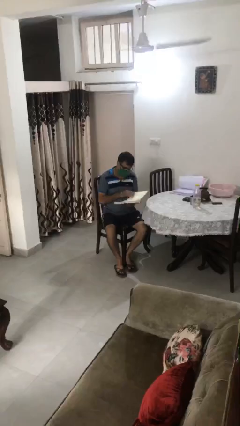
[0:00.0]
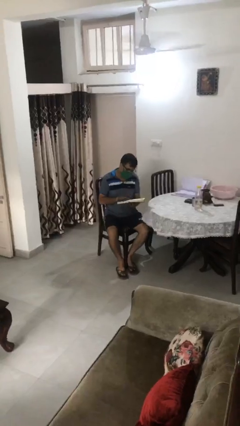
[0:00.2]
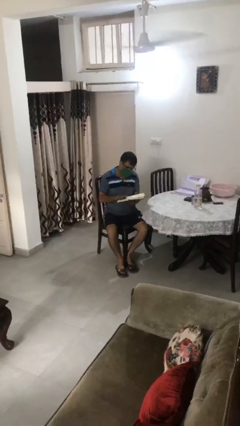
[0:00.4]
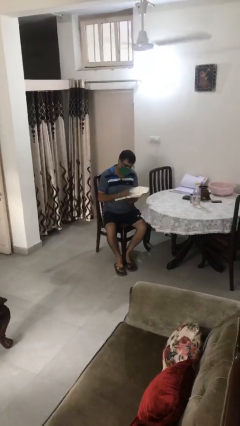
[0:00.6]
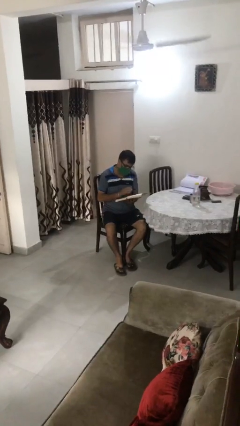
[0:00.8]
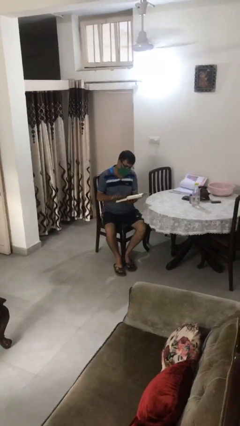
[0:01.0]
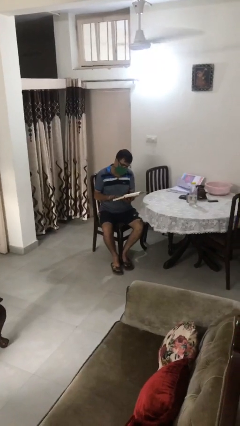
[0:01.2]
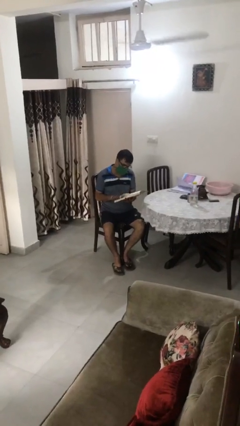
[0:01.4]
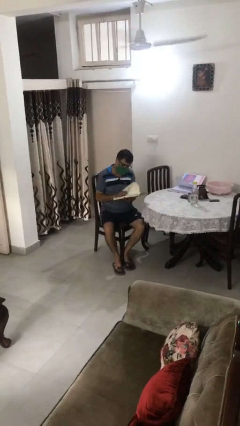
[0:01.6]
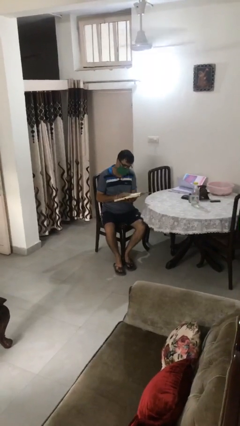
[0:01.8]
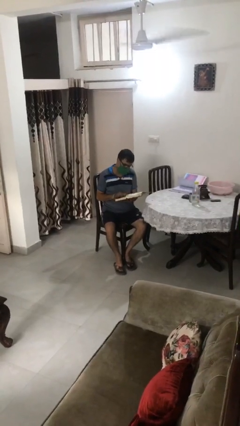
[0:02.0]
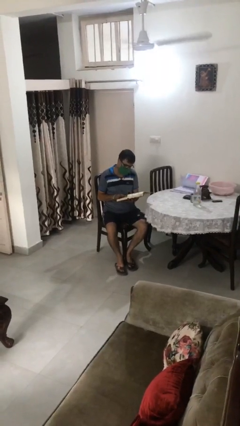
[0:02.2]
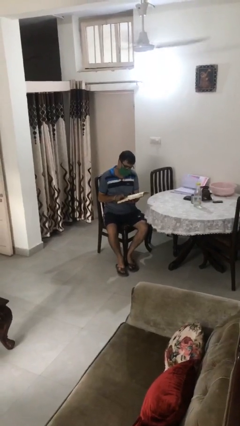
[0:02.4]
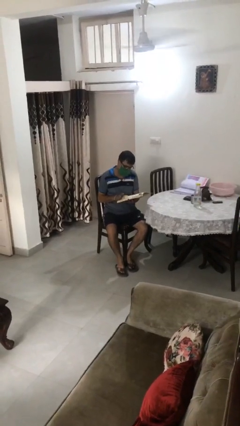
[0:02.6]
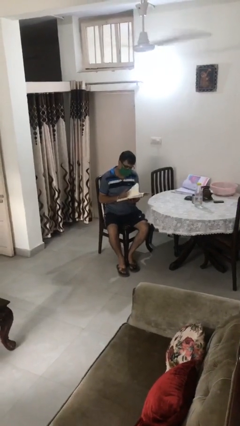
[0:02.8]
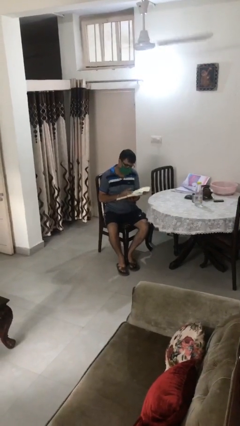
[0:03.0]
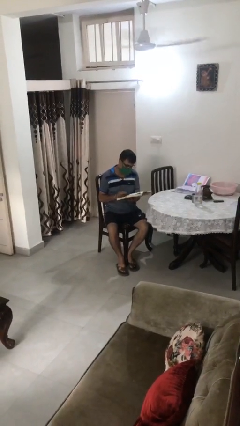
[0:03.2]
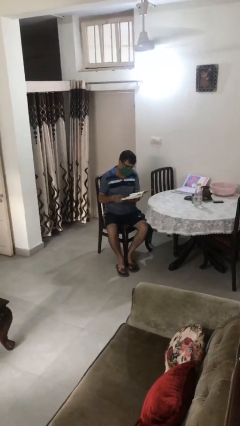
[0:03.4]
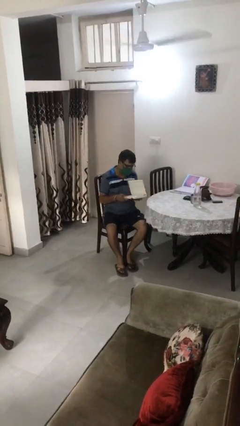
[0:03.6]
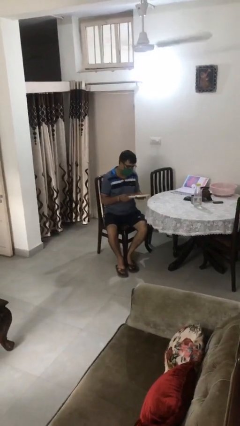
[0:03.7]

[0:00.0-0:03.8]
person reads document

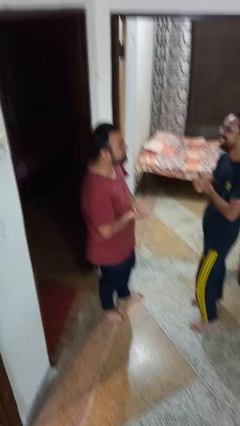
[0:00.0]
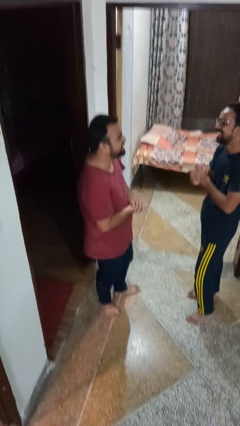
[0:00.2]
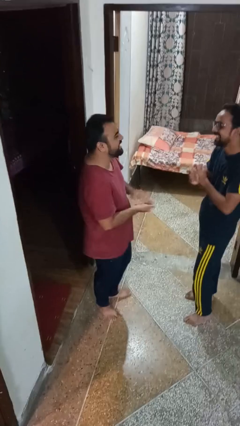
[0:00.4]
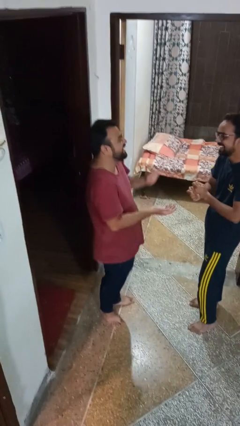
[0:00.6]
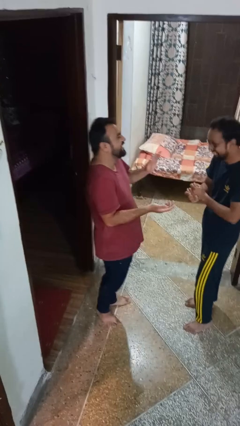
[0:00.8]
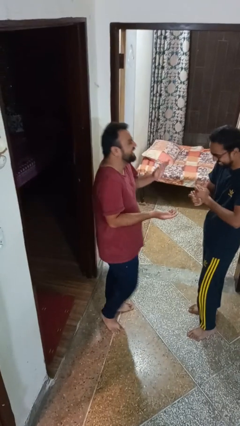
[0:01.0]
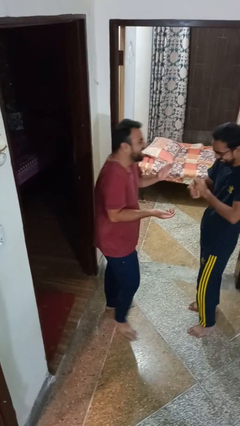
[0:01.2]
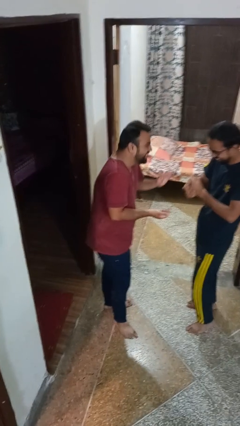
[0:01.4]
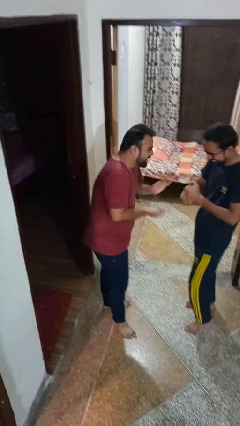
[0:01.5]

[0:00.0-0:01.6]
person laughs with person

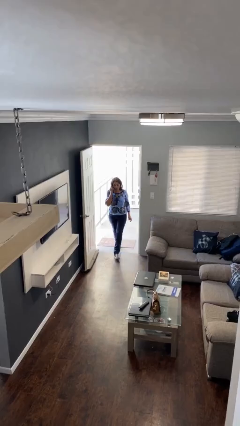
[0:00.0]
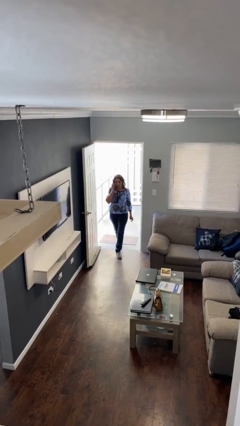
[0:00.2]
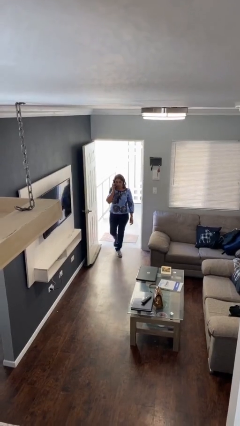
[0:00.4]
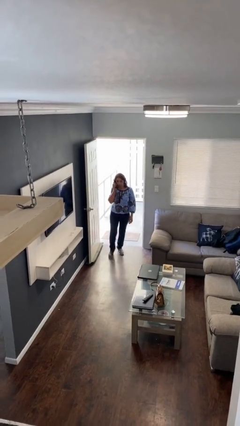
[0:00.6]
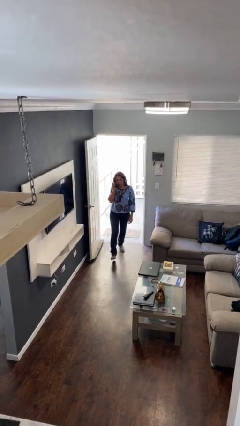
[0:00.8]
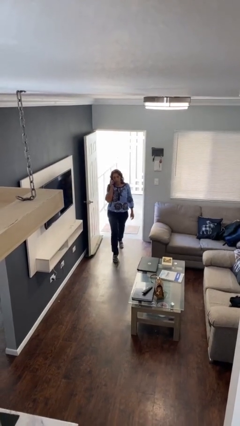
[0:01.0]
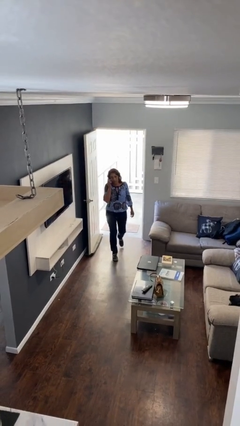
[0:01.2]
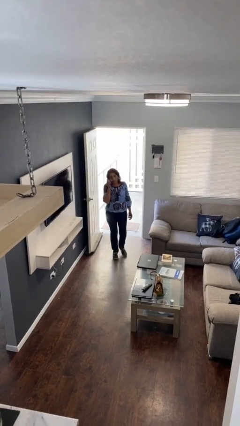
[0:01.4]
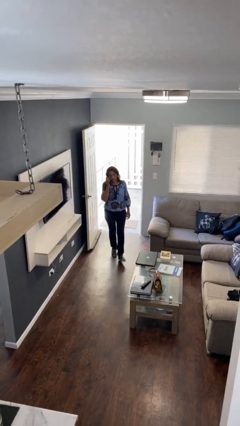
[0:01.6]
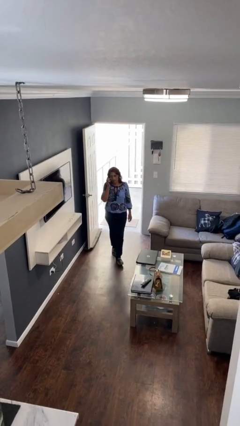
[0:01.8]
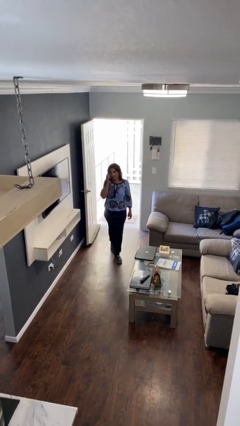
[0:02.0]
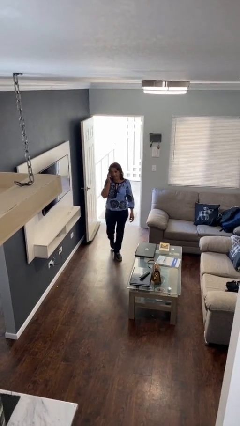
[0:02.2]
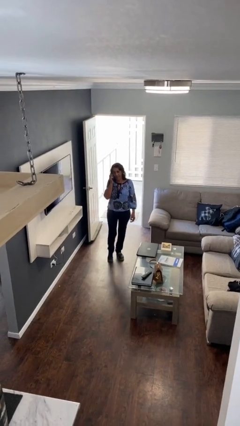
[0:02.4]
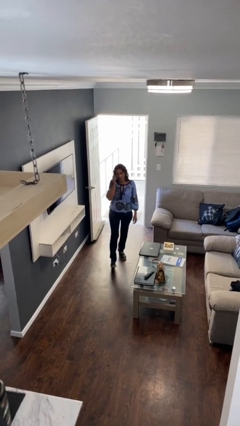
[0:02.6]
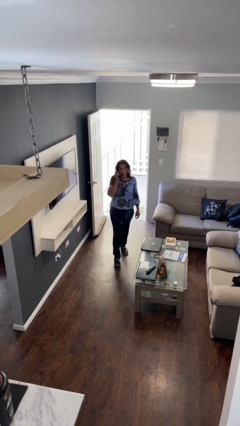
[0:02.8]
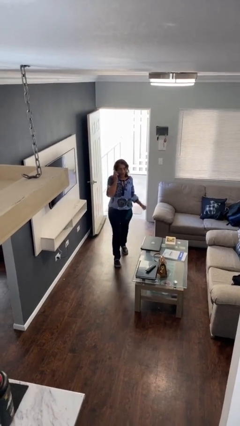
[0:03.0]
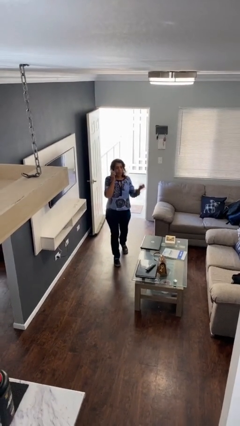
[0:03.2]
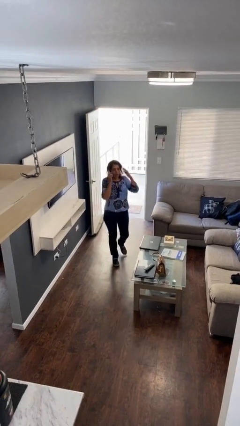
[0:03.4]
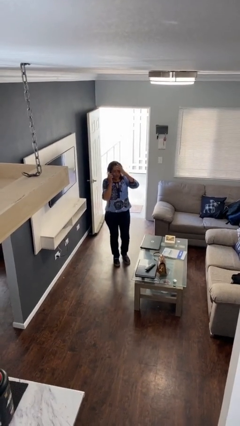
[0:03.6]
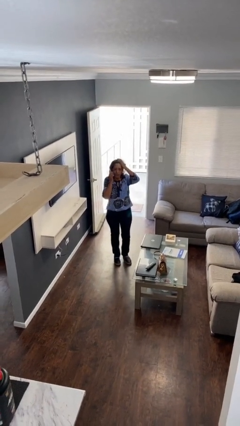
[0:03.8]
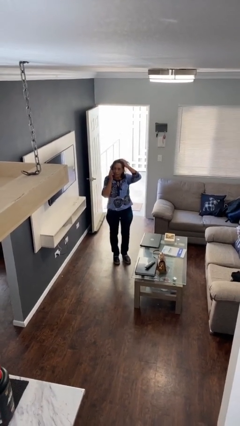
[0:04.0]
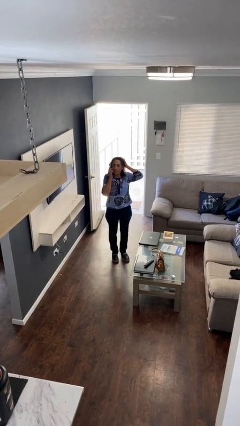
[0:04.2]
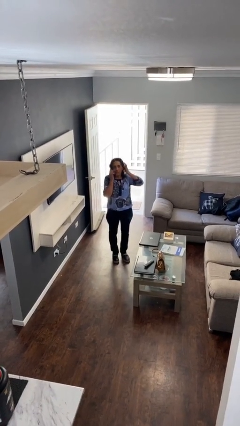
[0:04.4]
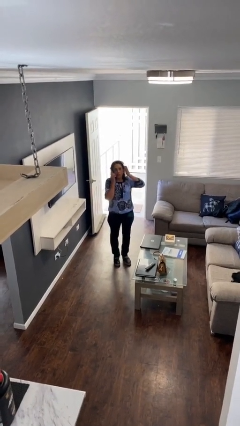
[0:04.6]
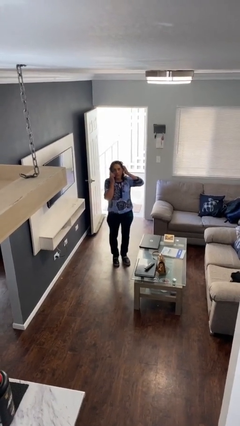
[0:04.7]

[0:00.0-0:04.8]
person enters scene through structure

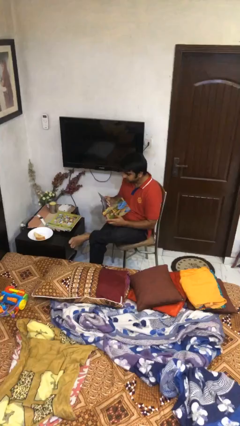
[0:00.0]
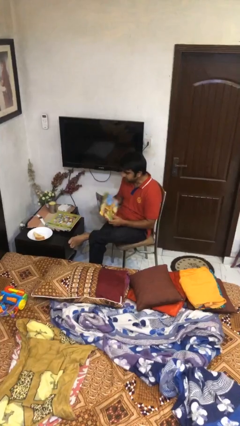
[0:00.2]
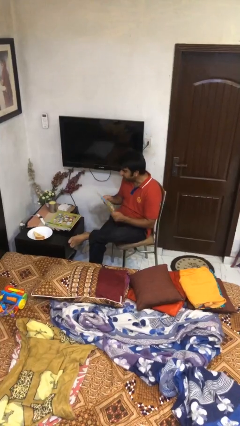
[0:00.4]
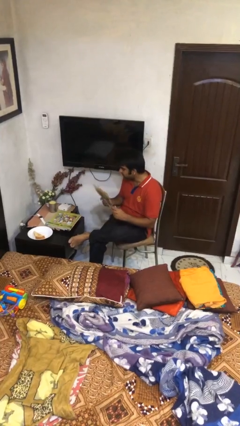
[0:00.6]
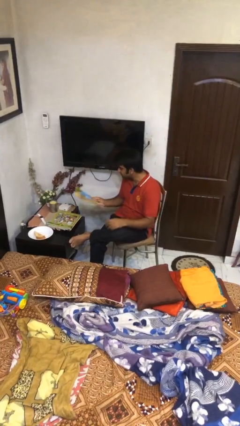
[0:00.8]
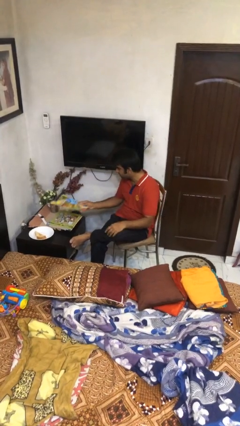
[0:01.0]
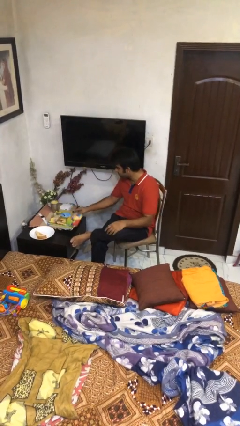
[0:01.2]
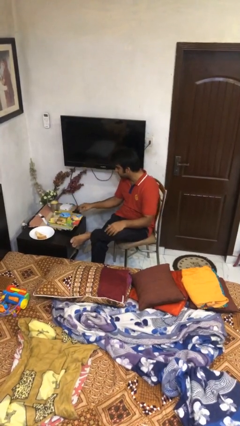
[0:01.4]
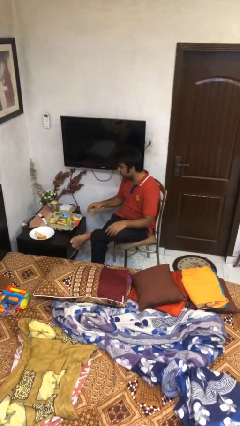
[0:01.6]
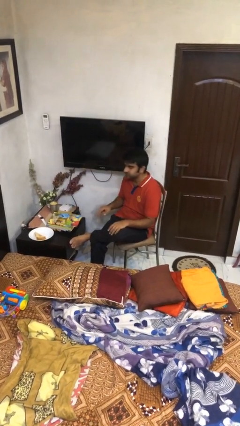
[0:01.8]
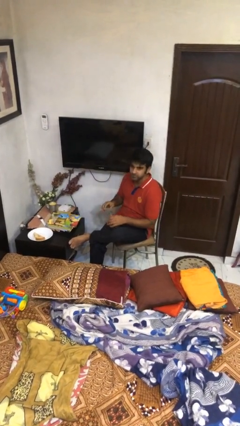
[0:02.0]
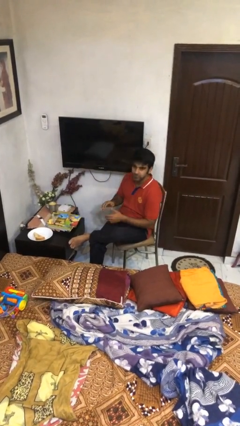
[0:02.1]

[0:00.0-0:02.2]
person puts down object on table

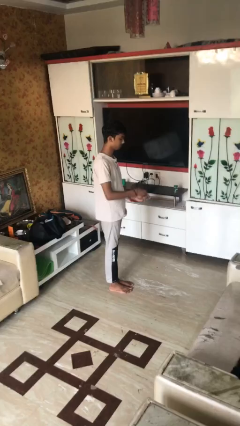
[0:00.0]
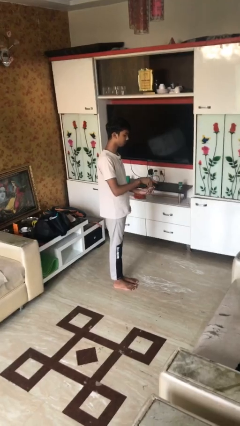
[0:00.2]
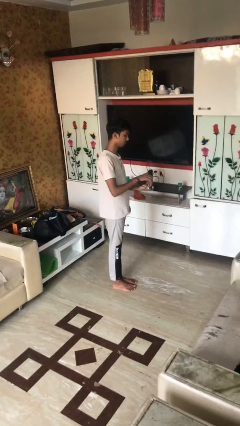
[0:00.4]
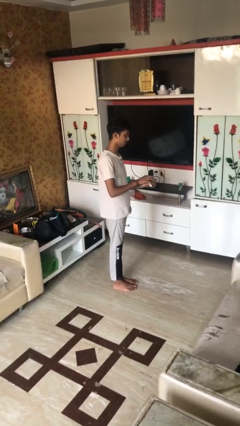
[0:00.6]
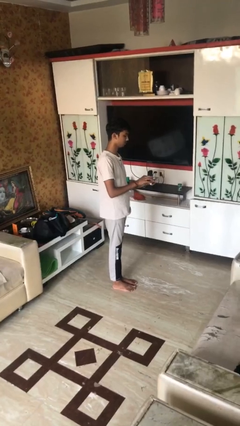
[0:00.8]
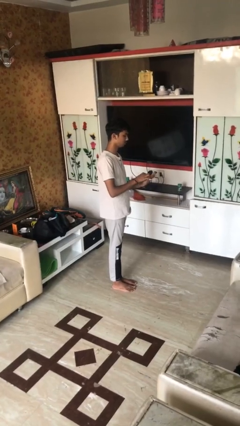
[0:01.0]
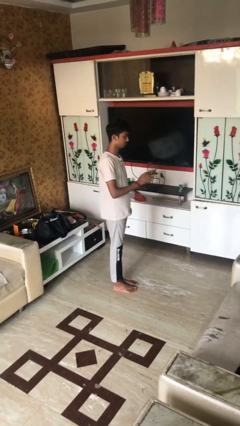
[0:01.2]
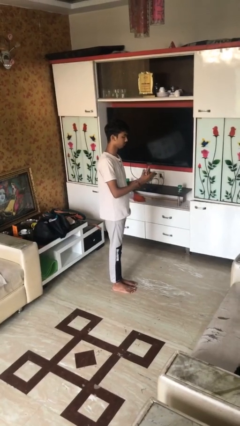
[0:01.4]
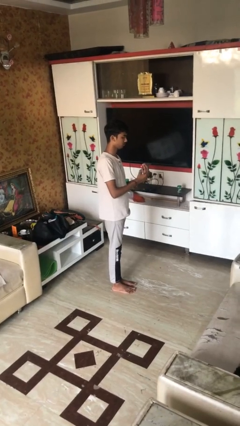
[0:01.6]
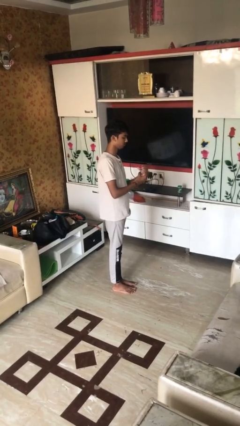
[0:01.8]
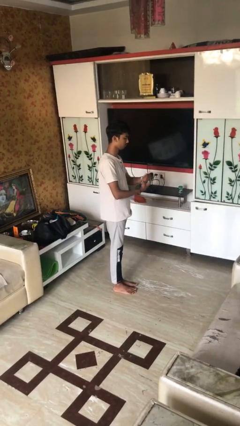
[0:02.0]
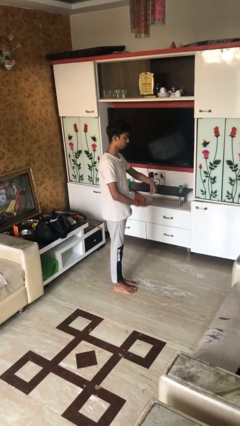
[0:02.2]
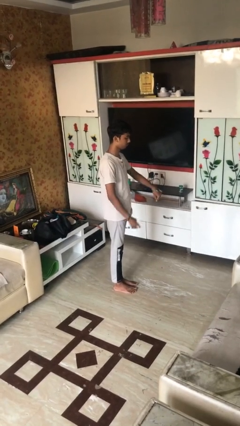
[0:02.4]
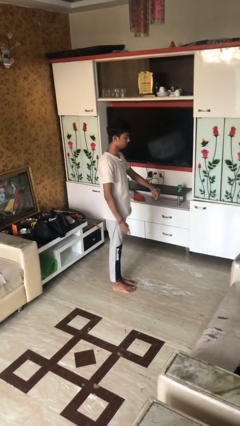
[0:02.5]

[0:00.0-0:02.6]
person puts on wristwatch

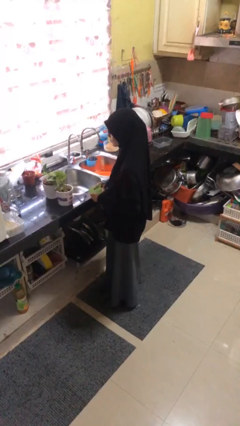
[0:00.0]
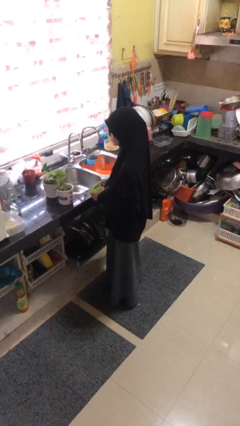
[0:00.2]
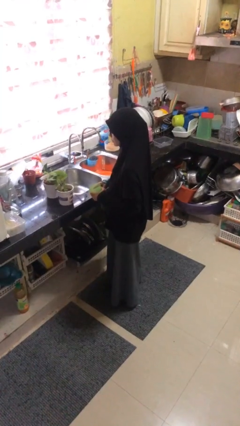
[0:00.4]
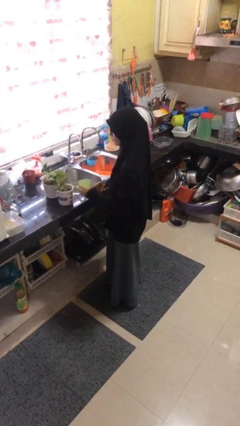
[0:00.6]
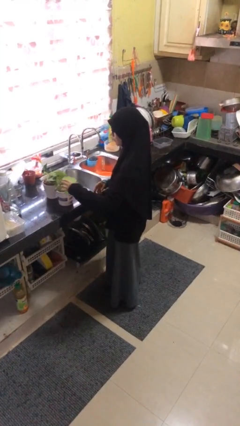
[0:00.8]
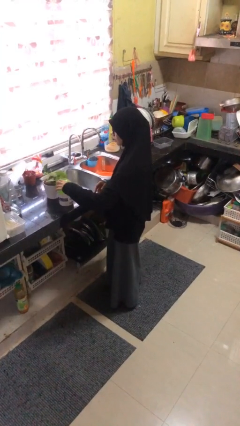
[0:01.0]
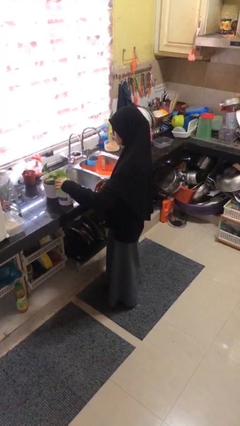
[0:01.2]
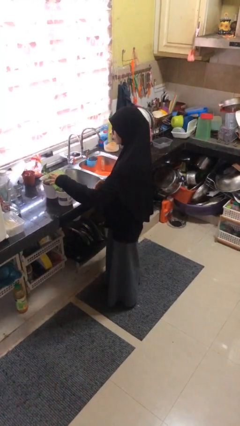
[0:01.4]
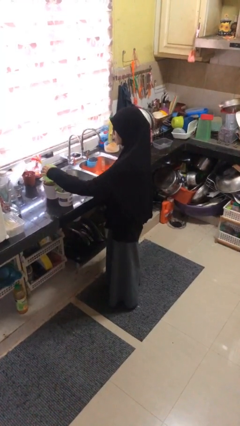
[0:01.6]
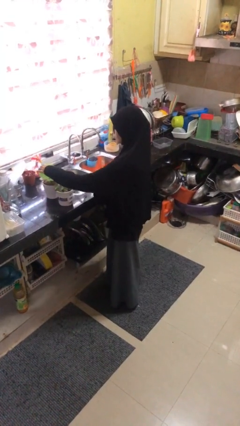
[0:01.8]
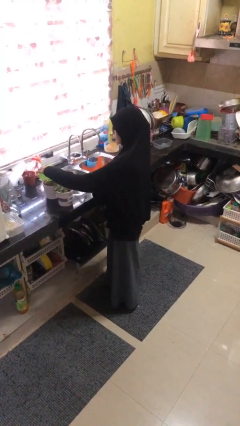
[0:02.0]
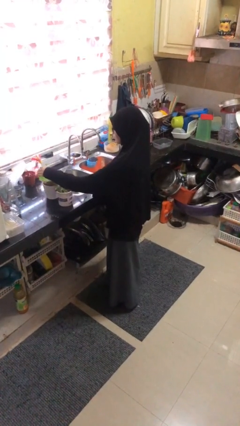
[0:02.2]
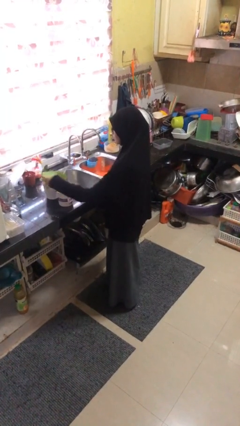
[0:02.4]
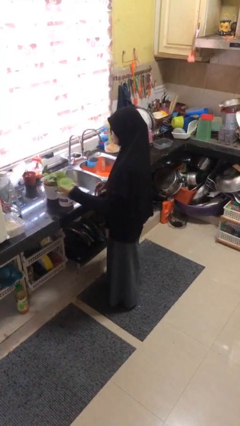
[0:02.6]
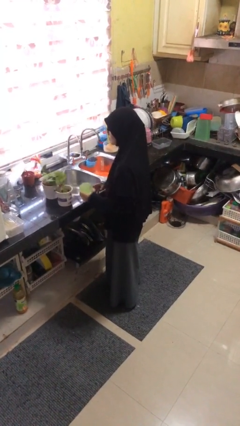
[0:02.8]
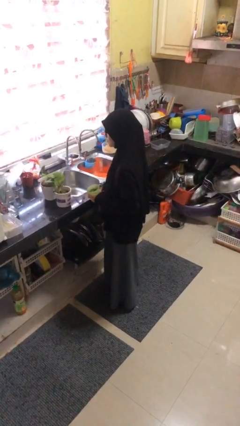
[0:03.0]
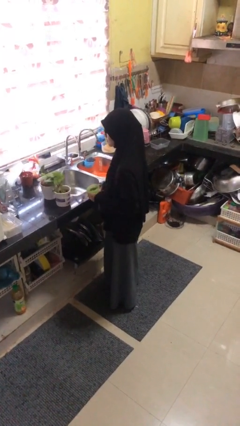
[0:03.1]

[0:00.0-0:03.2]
person waters houseplant
